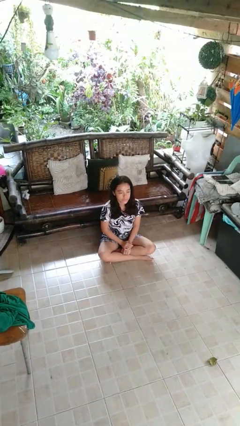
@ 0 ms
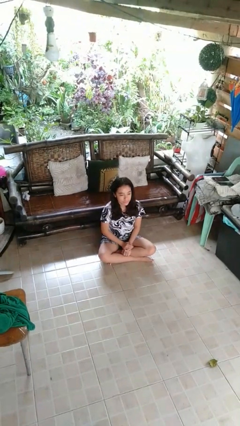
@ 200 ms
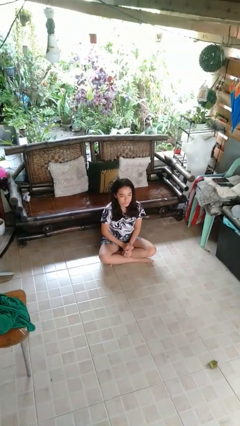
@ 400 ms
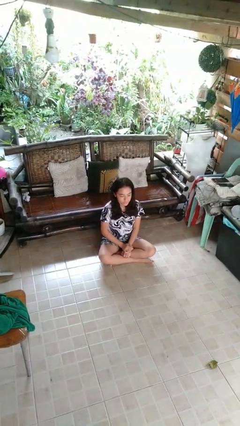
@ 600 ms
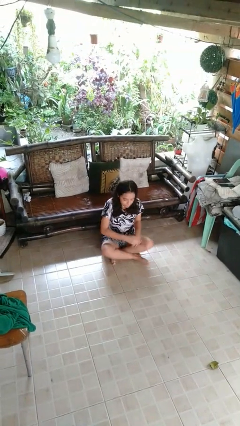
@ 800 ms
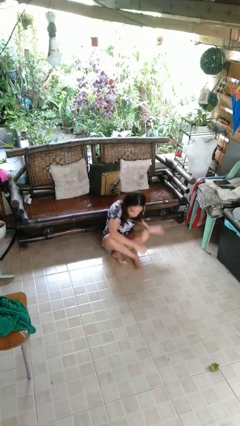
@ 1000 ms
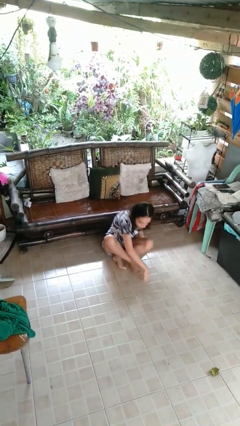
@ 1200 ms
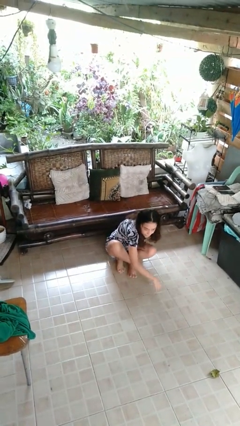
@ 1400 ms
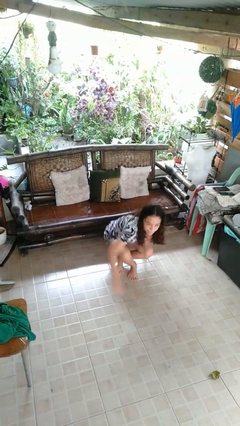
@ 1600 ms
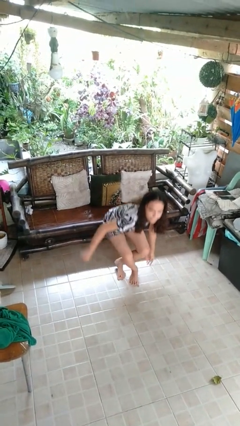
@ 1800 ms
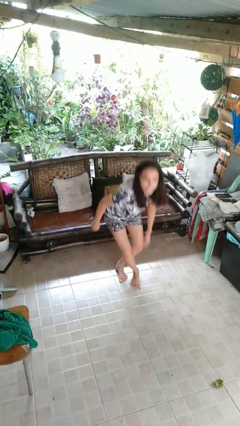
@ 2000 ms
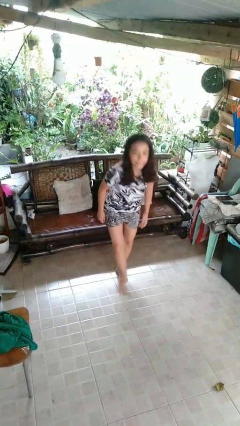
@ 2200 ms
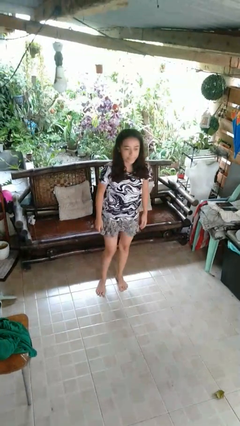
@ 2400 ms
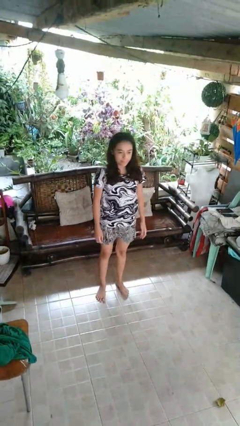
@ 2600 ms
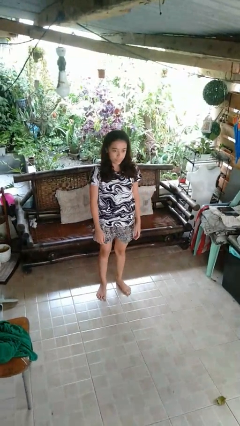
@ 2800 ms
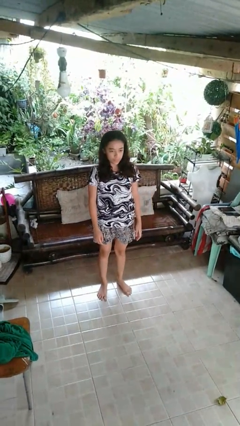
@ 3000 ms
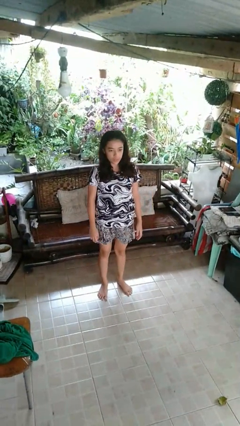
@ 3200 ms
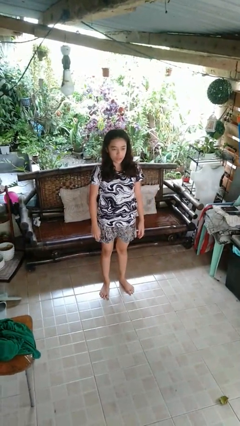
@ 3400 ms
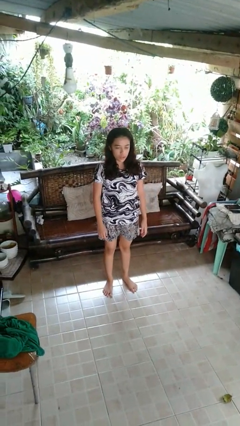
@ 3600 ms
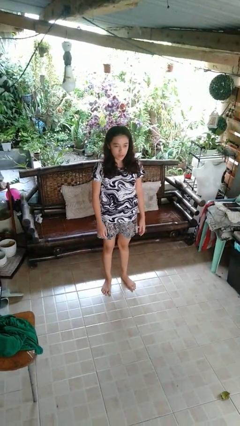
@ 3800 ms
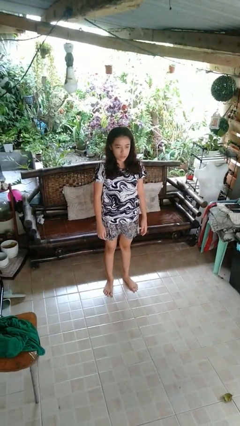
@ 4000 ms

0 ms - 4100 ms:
person stands up from floor

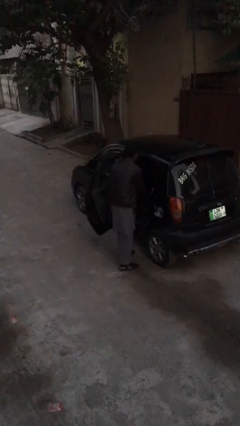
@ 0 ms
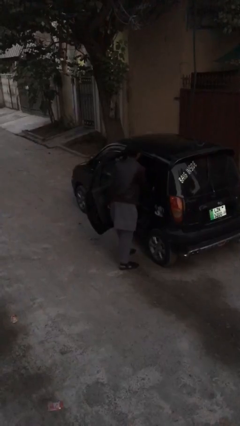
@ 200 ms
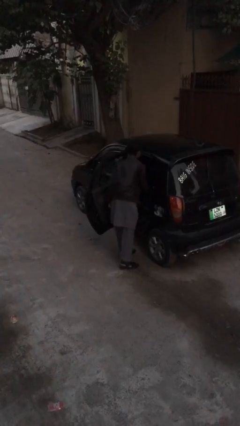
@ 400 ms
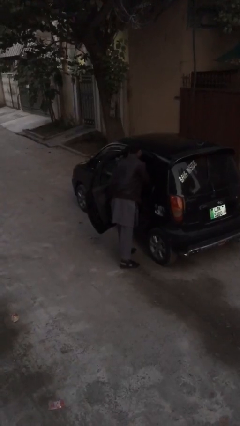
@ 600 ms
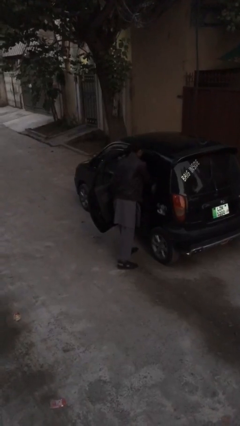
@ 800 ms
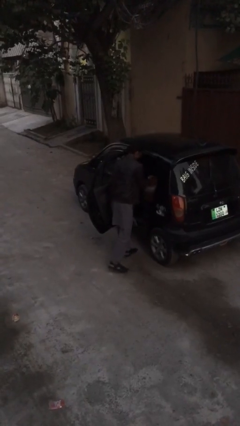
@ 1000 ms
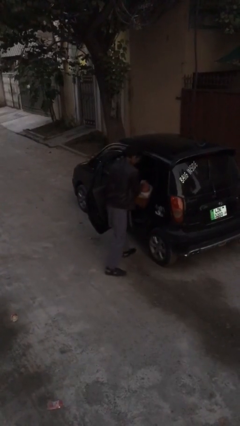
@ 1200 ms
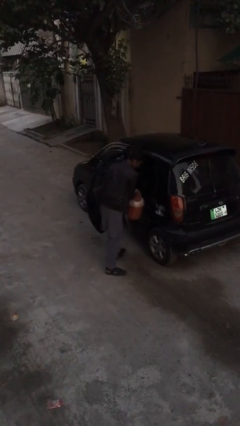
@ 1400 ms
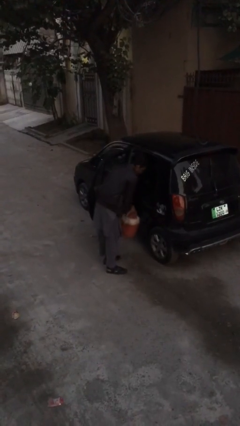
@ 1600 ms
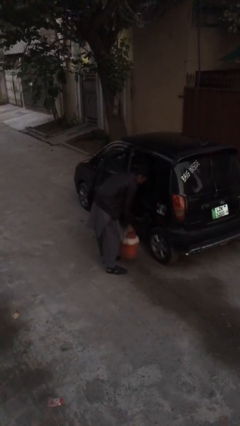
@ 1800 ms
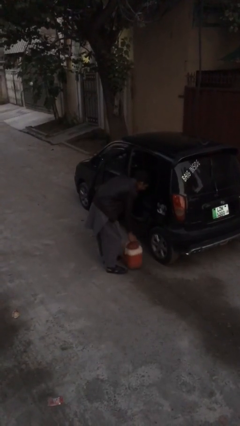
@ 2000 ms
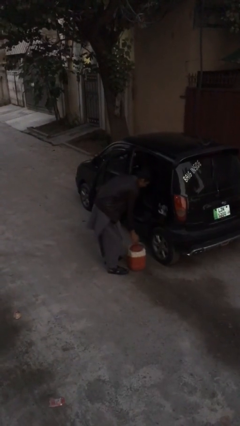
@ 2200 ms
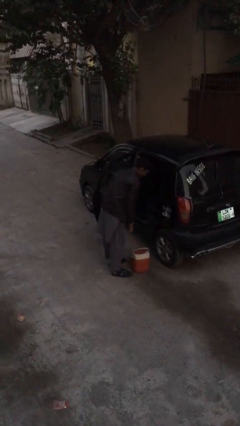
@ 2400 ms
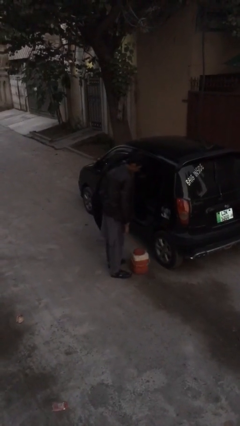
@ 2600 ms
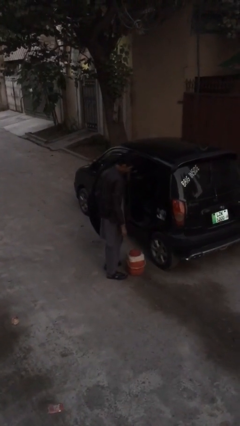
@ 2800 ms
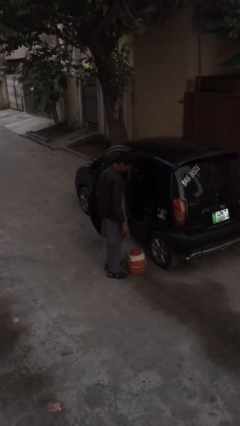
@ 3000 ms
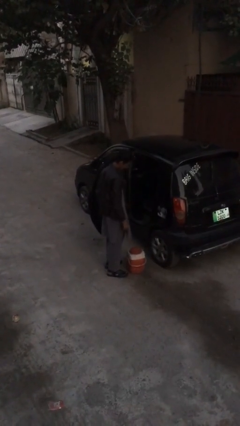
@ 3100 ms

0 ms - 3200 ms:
person unloads car

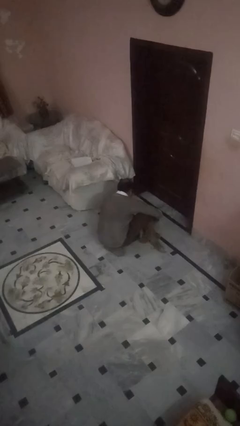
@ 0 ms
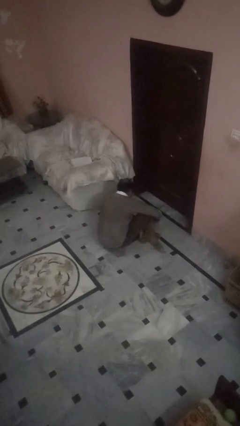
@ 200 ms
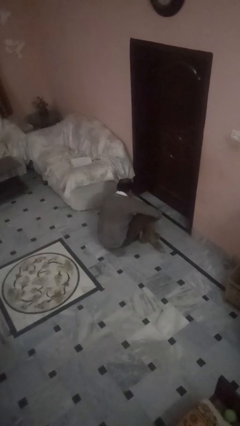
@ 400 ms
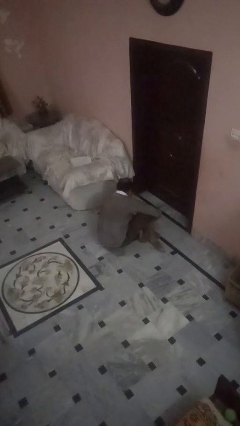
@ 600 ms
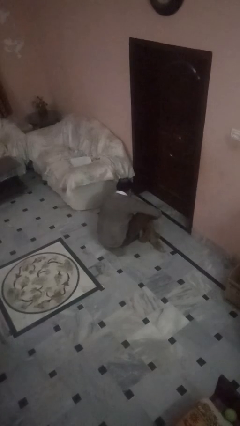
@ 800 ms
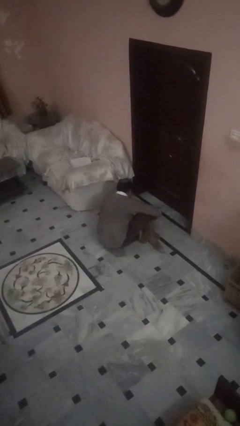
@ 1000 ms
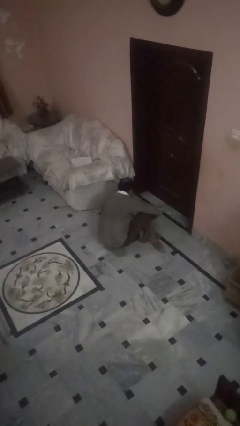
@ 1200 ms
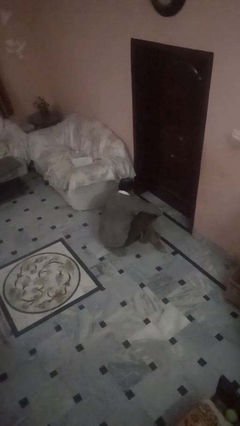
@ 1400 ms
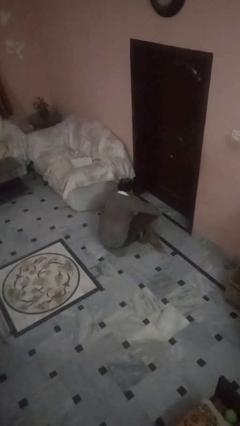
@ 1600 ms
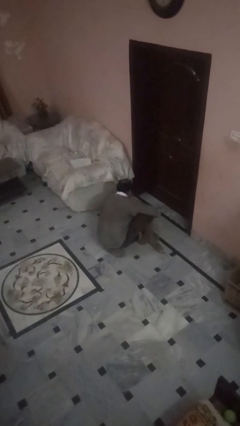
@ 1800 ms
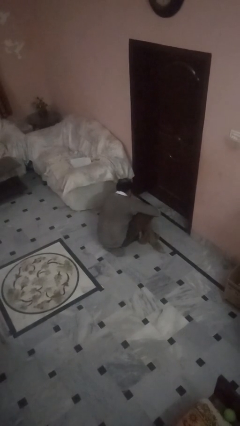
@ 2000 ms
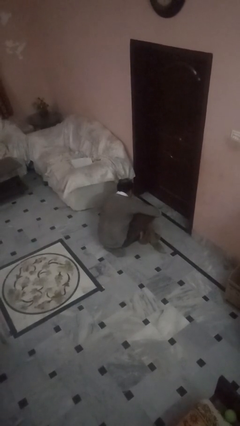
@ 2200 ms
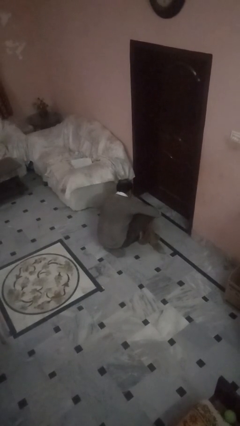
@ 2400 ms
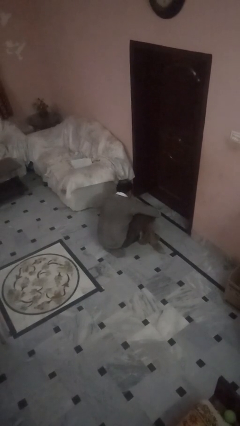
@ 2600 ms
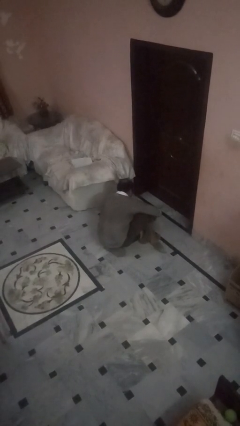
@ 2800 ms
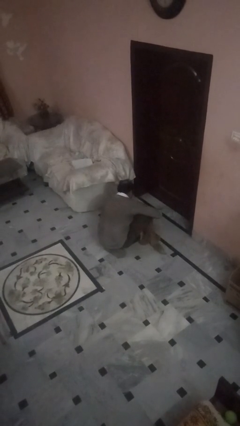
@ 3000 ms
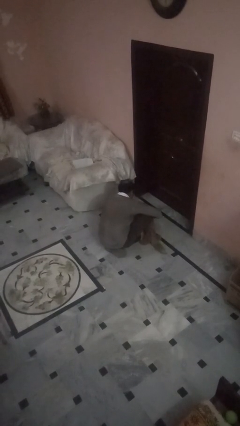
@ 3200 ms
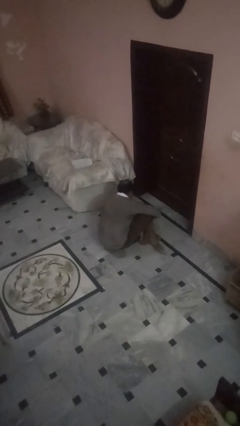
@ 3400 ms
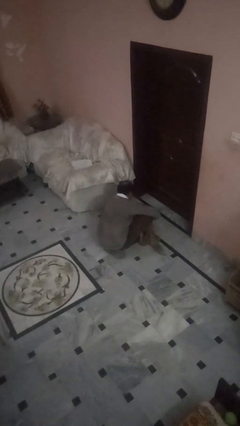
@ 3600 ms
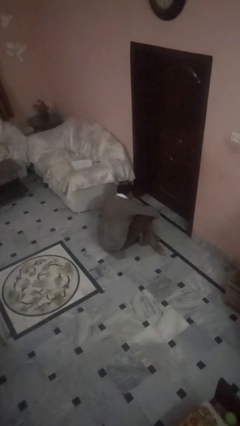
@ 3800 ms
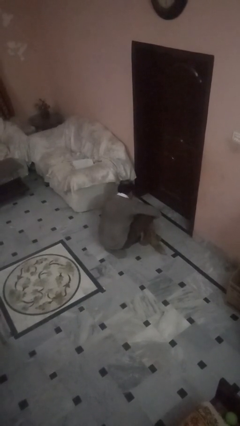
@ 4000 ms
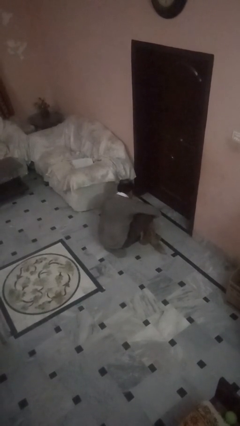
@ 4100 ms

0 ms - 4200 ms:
person unattaches leash from dog

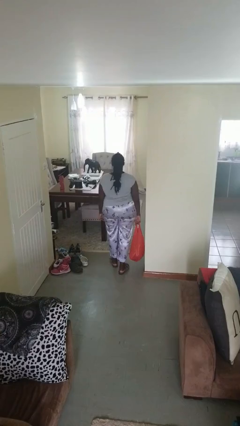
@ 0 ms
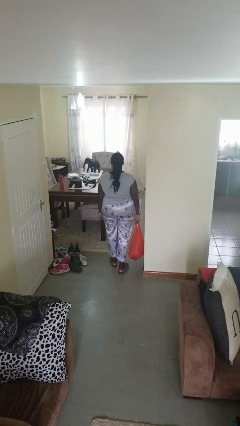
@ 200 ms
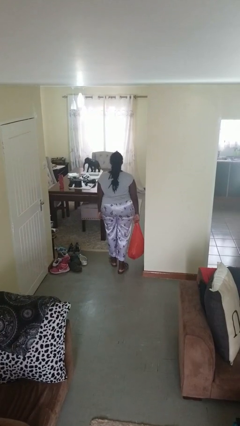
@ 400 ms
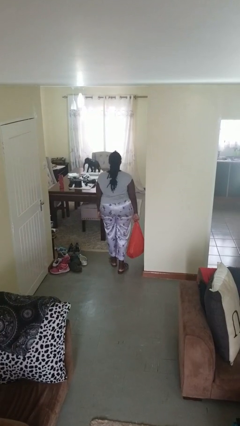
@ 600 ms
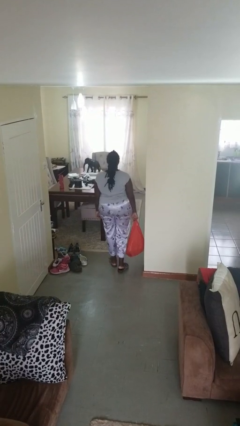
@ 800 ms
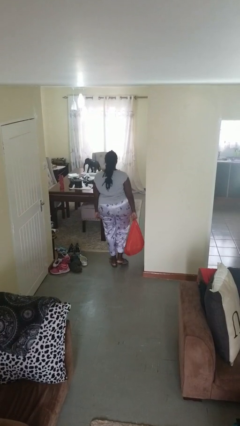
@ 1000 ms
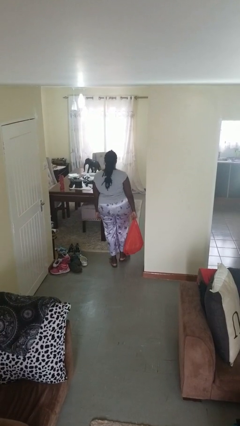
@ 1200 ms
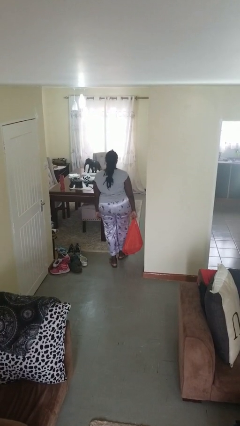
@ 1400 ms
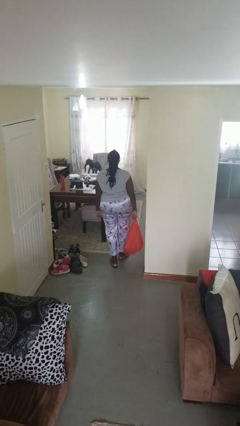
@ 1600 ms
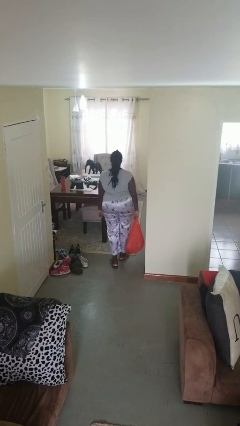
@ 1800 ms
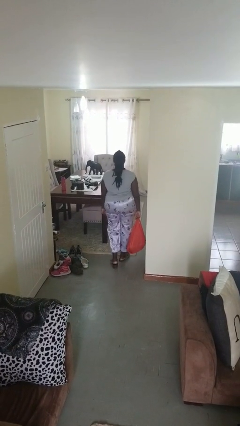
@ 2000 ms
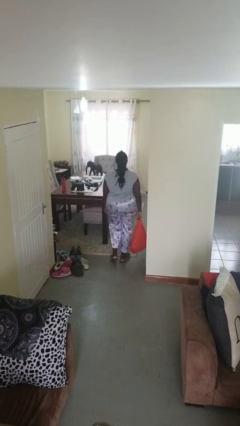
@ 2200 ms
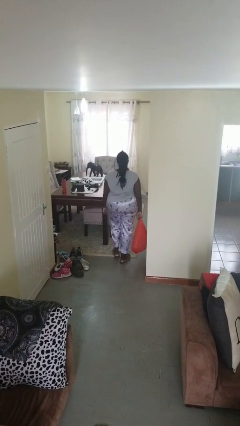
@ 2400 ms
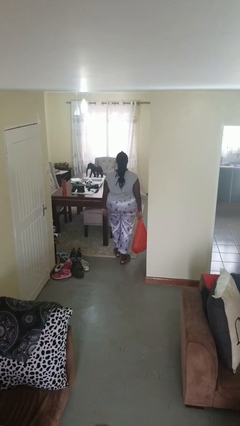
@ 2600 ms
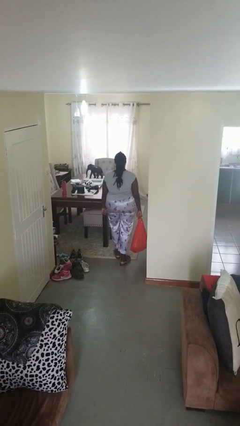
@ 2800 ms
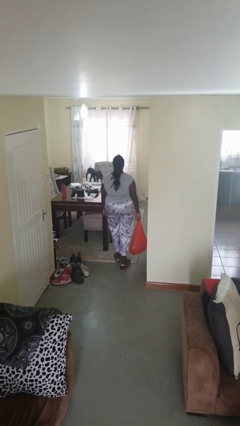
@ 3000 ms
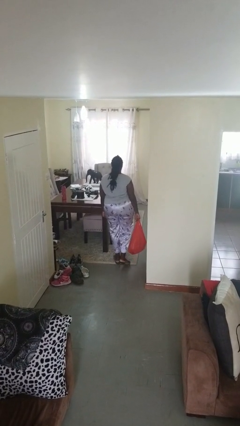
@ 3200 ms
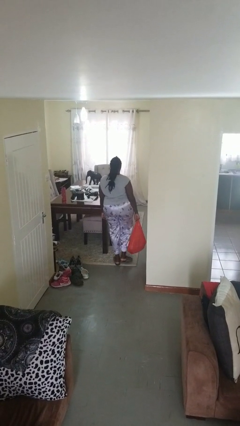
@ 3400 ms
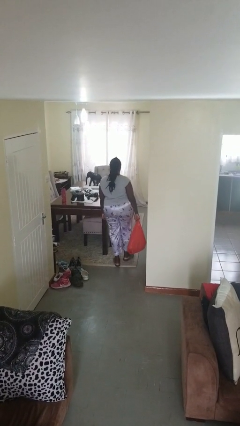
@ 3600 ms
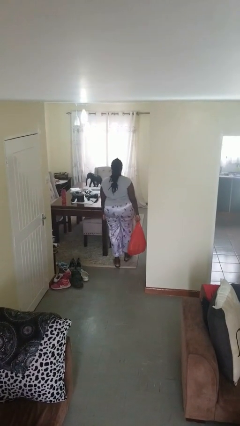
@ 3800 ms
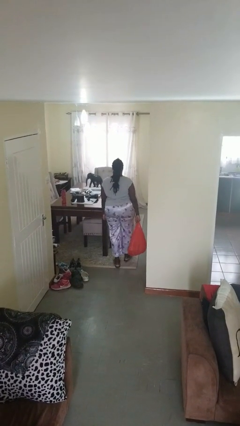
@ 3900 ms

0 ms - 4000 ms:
person carries groceries

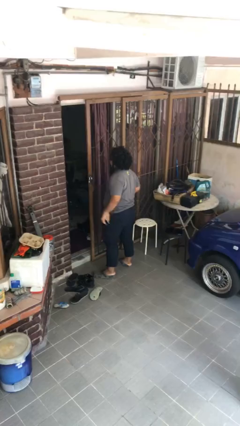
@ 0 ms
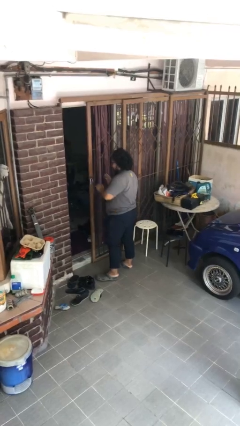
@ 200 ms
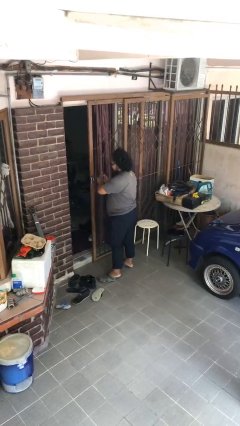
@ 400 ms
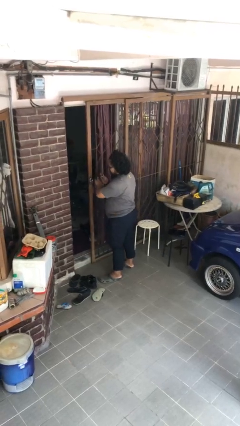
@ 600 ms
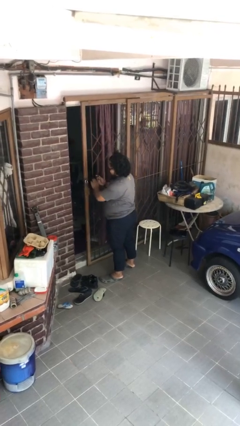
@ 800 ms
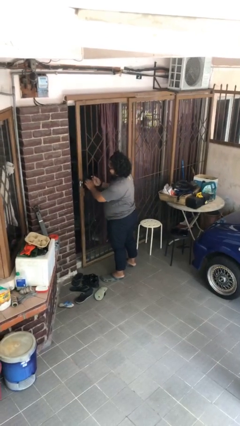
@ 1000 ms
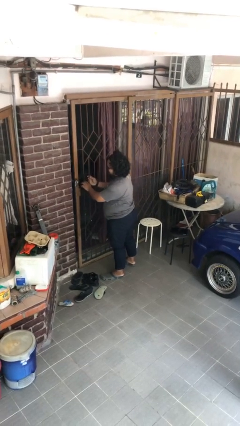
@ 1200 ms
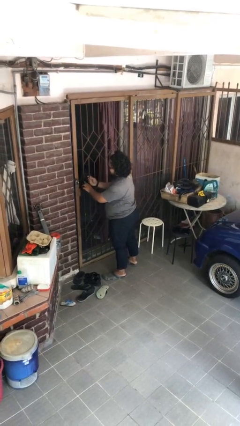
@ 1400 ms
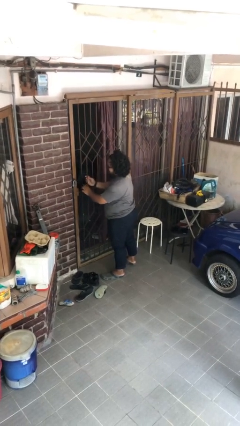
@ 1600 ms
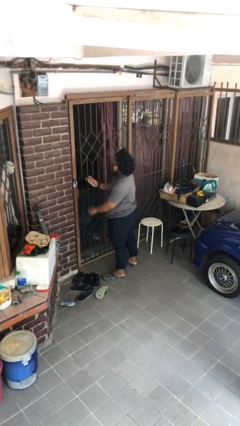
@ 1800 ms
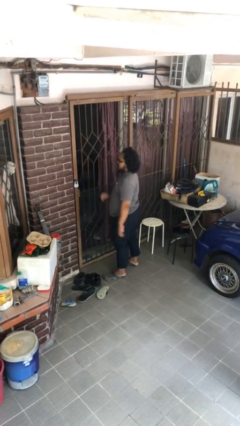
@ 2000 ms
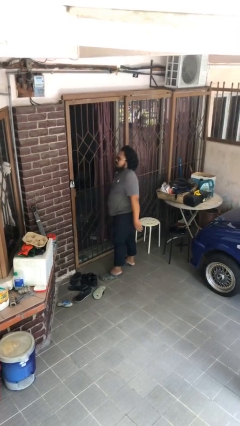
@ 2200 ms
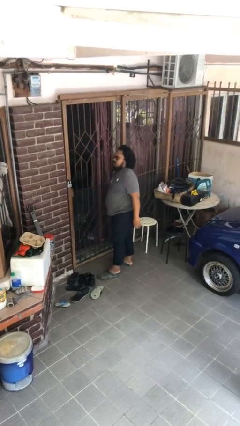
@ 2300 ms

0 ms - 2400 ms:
person closes facility door
